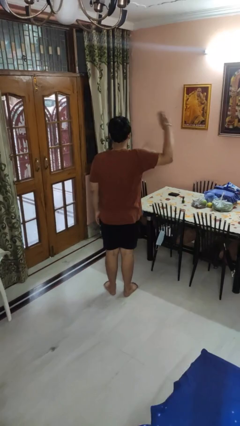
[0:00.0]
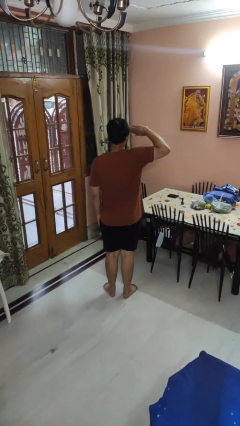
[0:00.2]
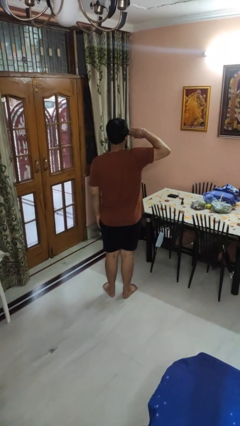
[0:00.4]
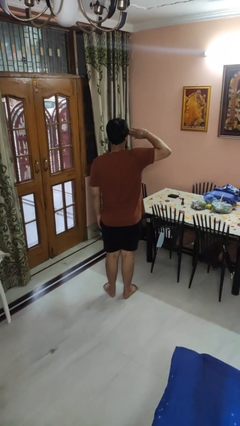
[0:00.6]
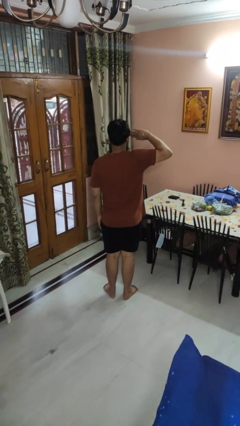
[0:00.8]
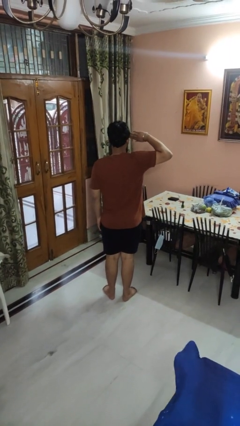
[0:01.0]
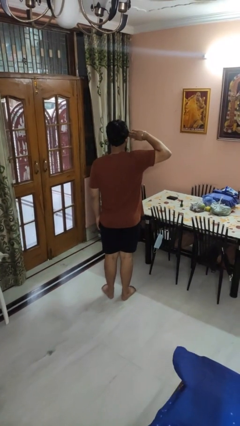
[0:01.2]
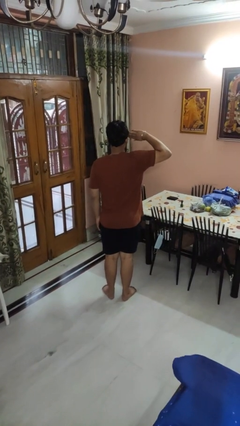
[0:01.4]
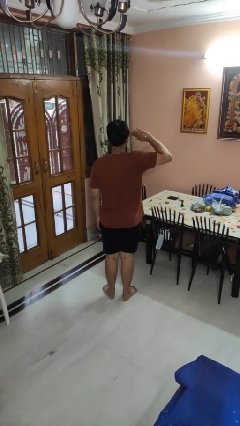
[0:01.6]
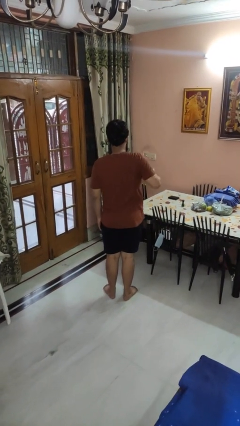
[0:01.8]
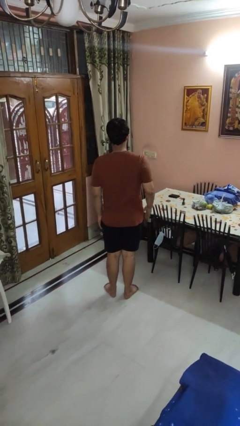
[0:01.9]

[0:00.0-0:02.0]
person salutes

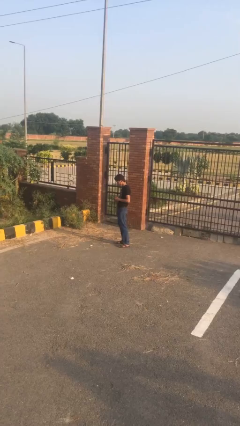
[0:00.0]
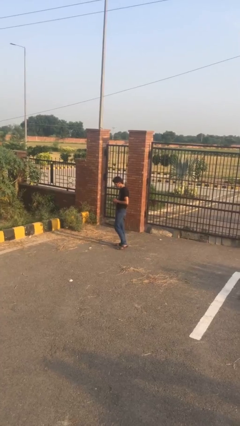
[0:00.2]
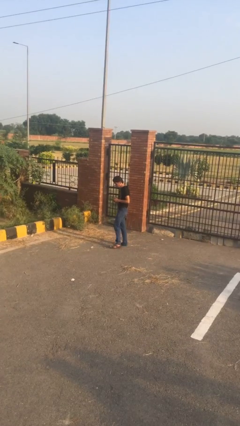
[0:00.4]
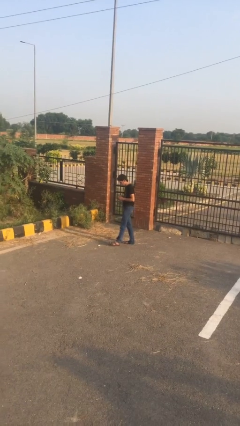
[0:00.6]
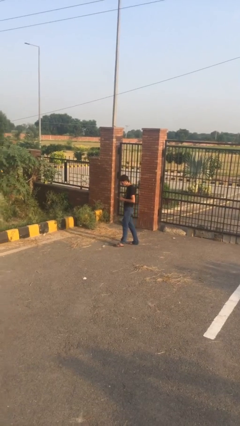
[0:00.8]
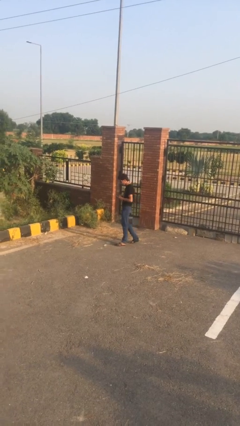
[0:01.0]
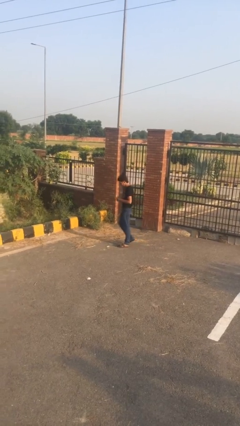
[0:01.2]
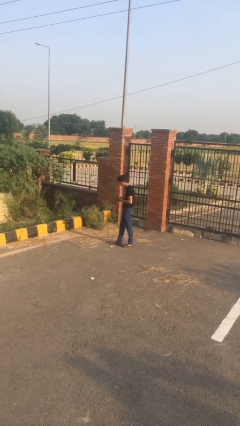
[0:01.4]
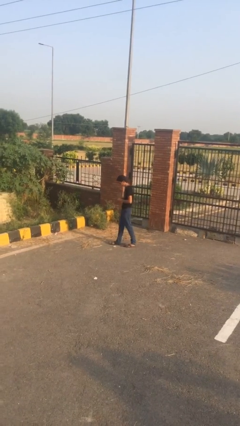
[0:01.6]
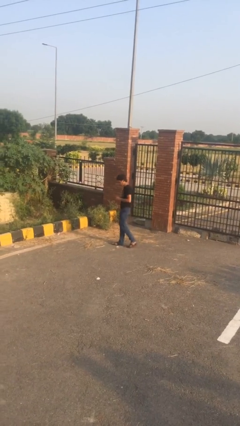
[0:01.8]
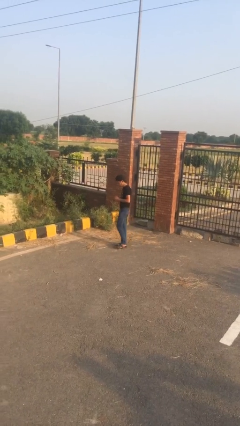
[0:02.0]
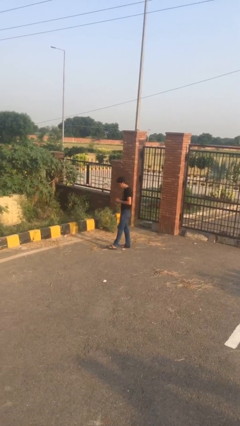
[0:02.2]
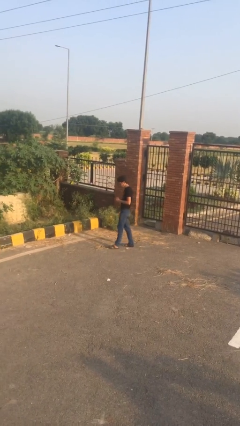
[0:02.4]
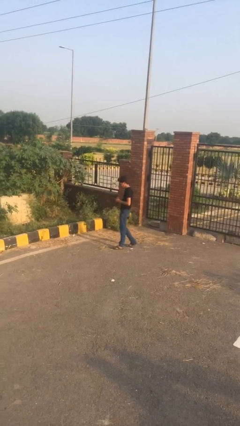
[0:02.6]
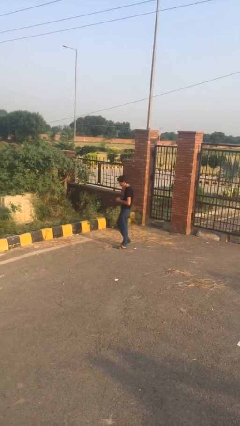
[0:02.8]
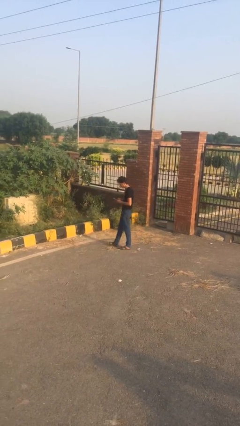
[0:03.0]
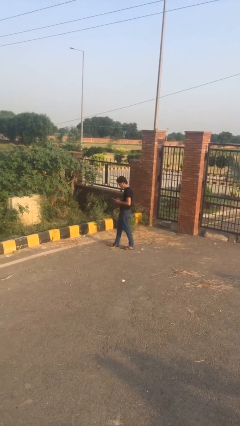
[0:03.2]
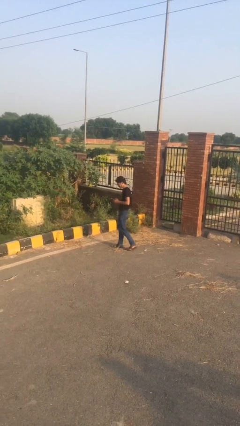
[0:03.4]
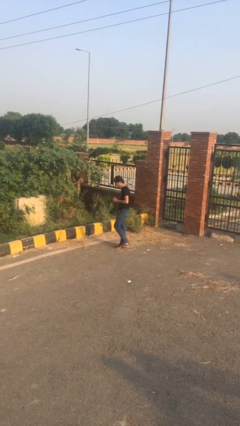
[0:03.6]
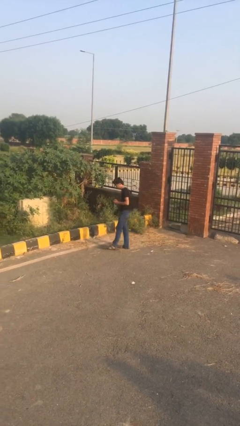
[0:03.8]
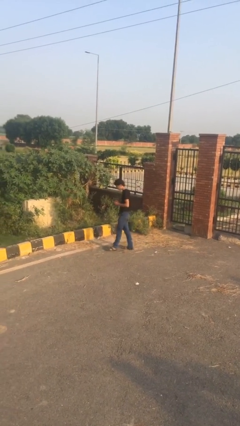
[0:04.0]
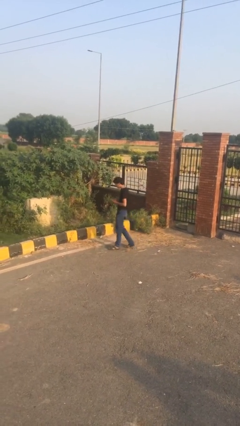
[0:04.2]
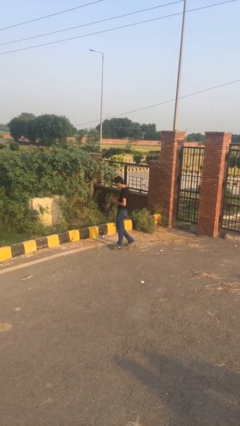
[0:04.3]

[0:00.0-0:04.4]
person texts on phone

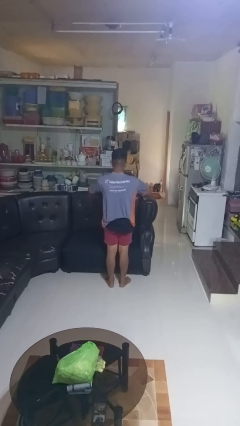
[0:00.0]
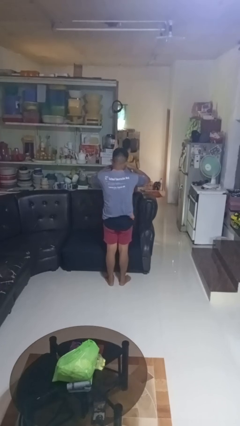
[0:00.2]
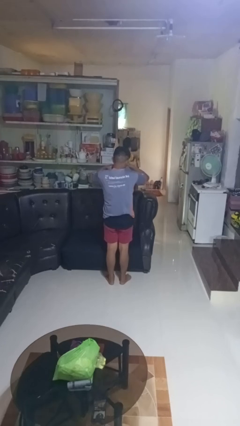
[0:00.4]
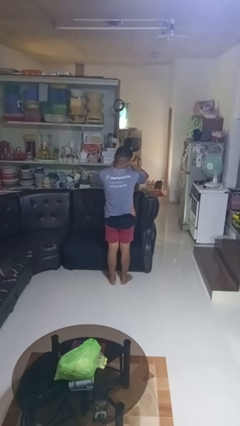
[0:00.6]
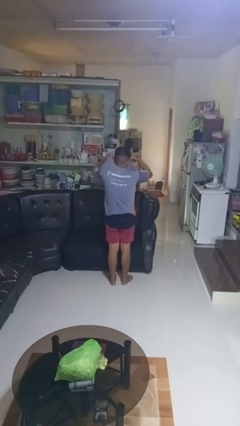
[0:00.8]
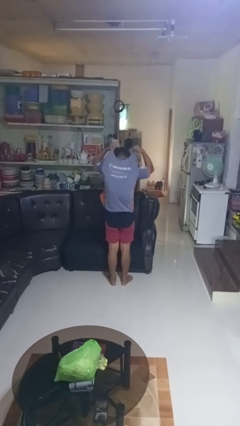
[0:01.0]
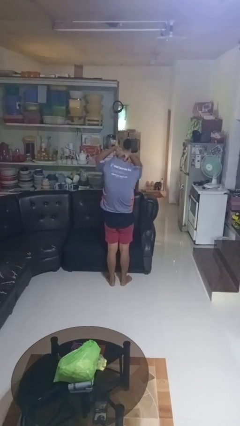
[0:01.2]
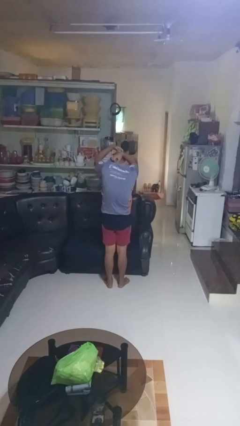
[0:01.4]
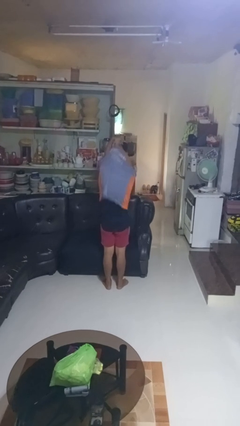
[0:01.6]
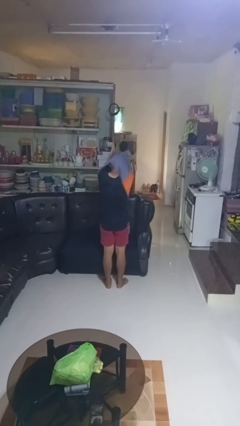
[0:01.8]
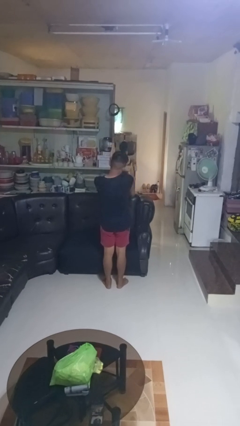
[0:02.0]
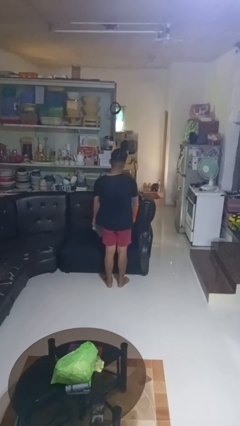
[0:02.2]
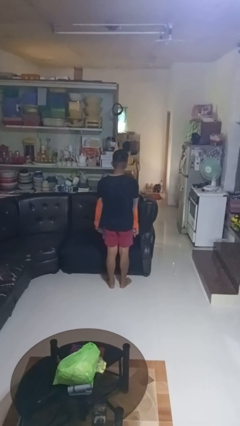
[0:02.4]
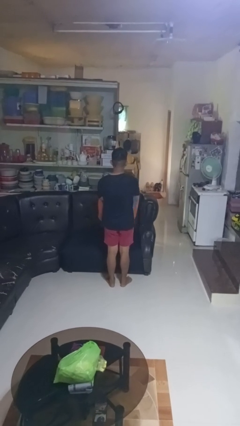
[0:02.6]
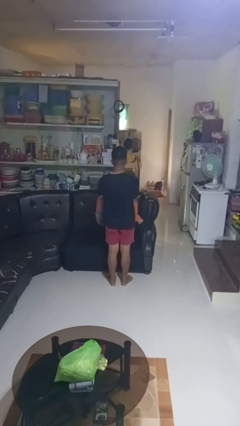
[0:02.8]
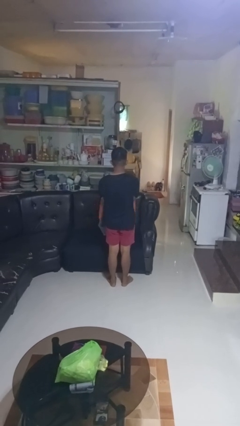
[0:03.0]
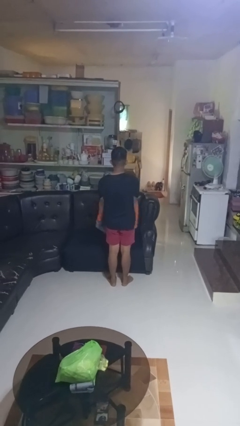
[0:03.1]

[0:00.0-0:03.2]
person takes off shirt

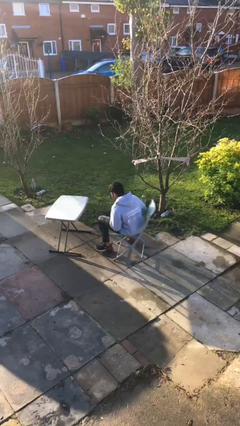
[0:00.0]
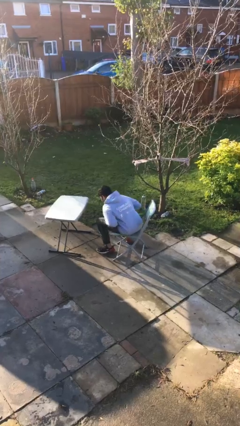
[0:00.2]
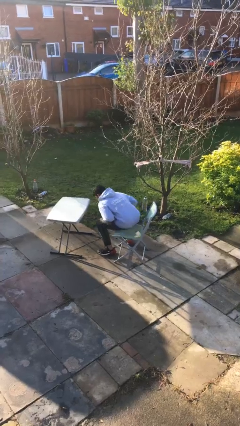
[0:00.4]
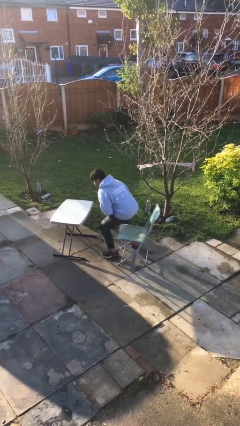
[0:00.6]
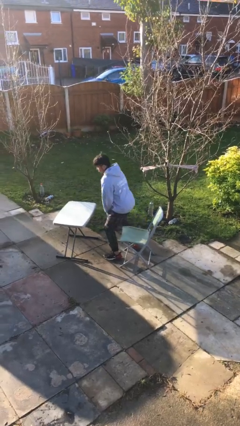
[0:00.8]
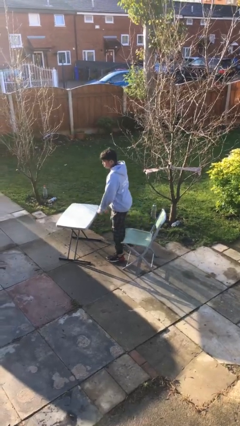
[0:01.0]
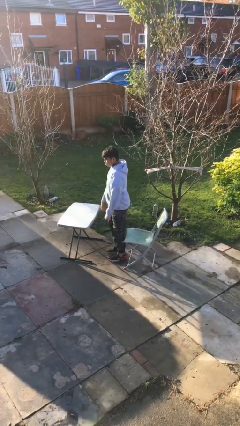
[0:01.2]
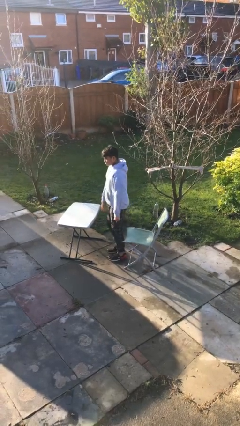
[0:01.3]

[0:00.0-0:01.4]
person stands up

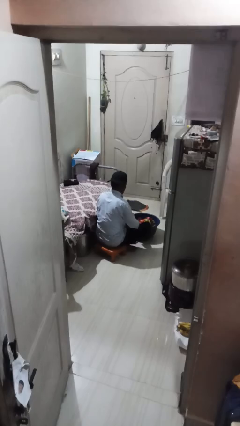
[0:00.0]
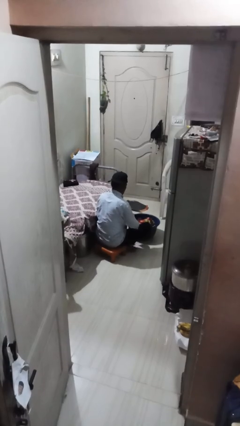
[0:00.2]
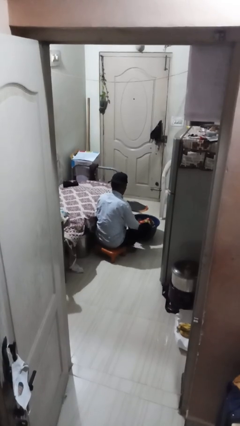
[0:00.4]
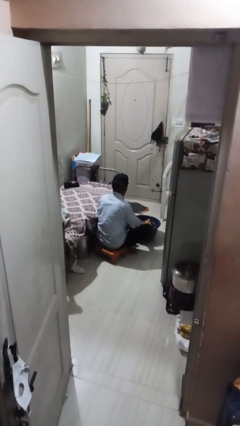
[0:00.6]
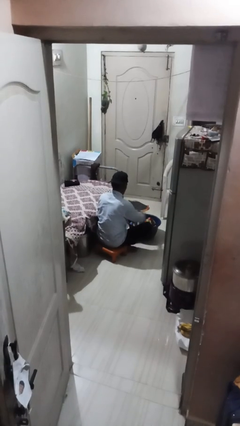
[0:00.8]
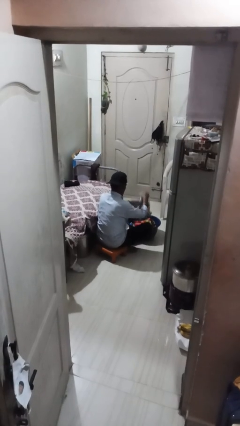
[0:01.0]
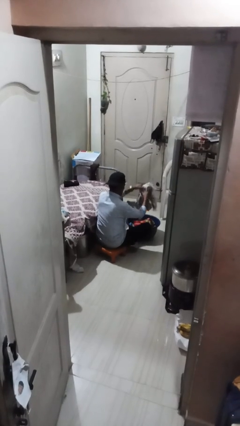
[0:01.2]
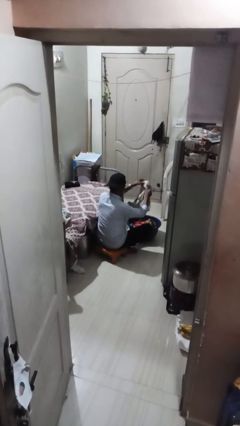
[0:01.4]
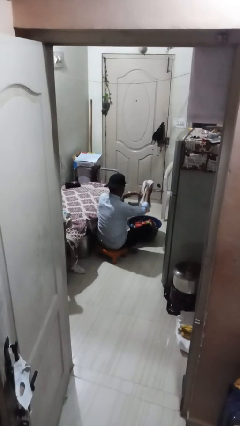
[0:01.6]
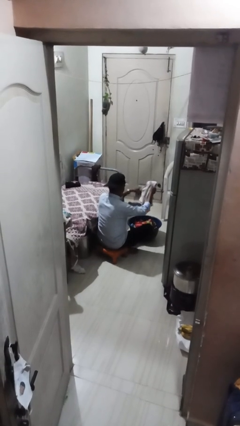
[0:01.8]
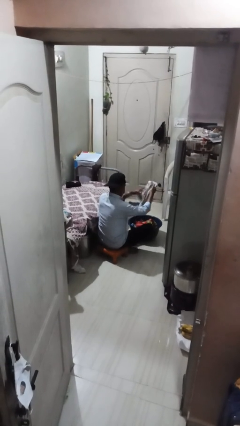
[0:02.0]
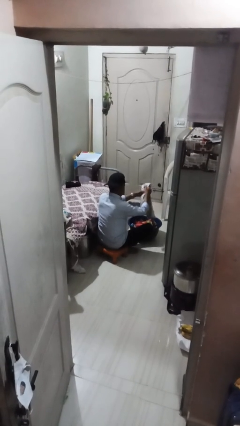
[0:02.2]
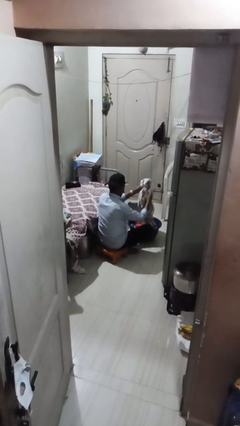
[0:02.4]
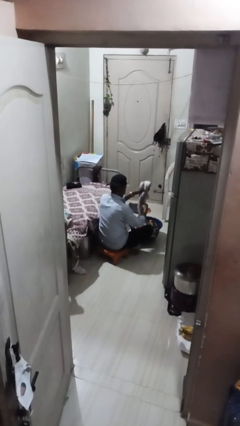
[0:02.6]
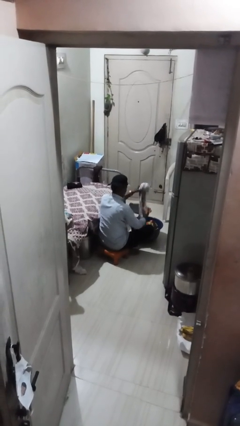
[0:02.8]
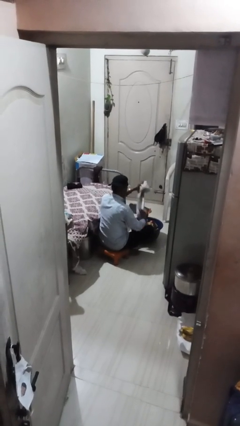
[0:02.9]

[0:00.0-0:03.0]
person takes object from basket

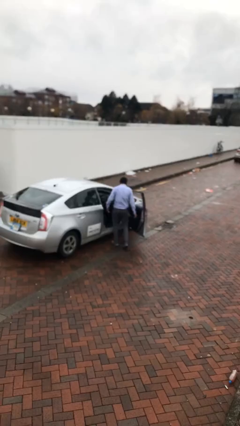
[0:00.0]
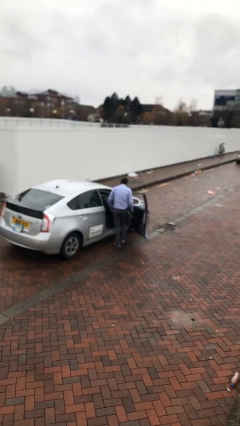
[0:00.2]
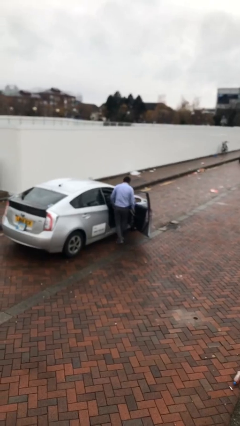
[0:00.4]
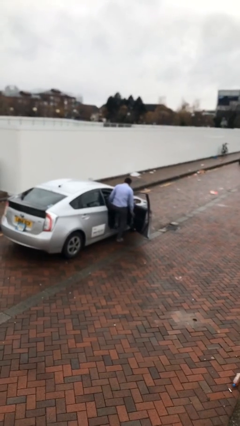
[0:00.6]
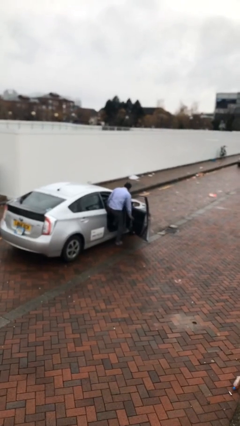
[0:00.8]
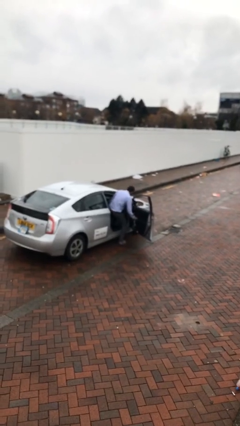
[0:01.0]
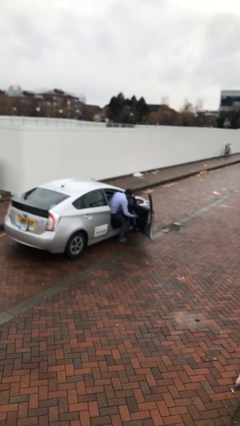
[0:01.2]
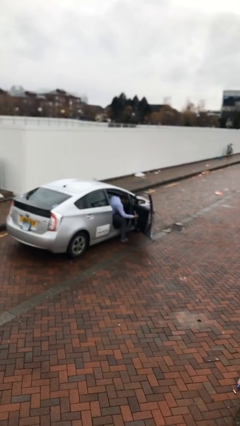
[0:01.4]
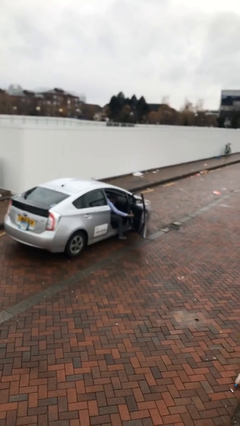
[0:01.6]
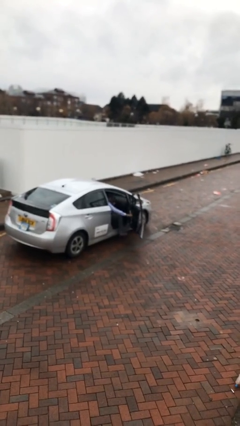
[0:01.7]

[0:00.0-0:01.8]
person enters car

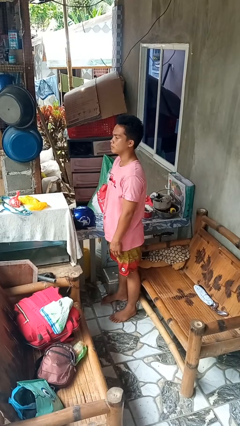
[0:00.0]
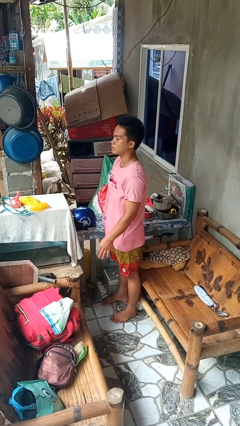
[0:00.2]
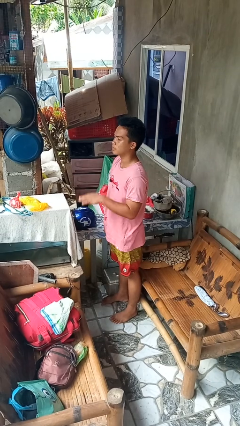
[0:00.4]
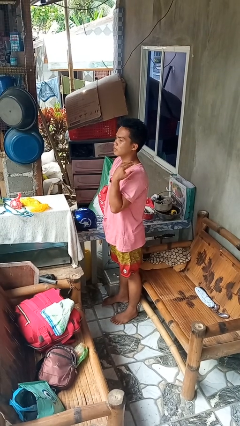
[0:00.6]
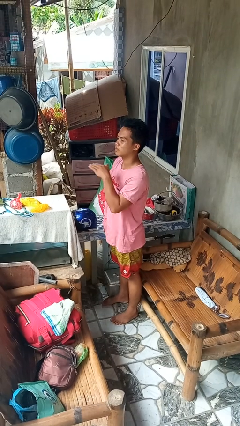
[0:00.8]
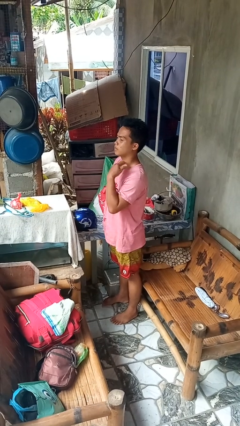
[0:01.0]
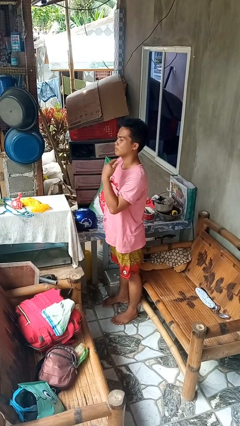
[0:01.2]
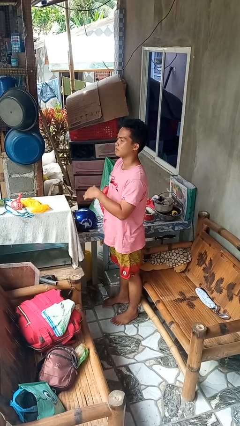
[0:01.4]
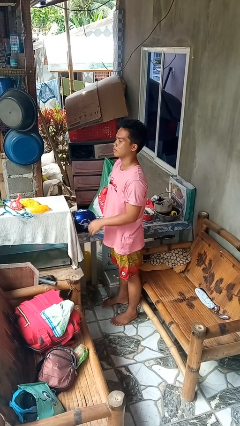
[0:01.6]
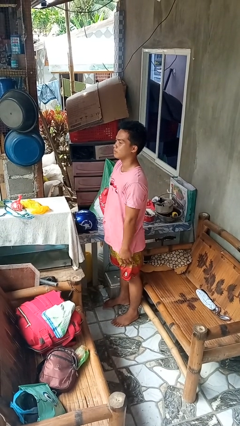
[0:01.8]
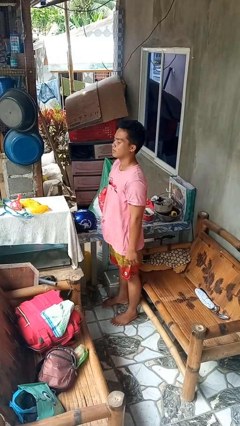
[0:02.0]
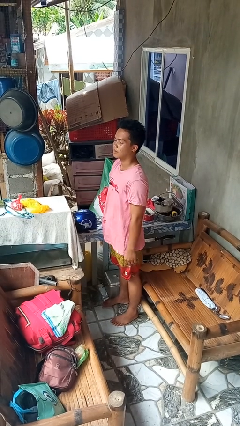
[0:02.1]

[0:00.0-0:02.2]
person gestures cut
